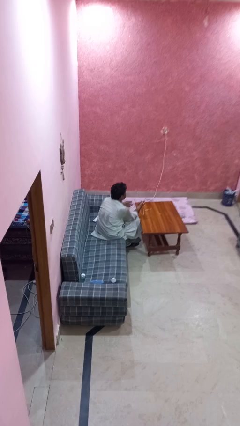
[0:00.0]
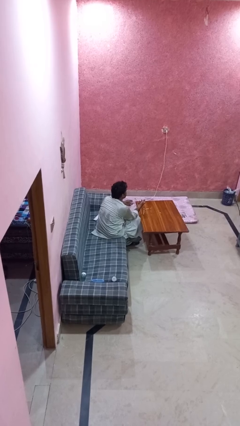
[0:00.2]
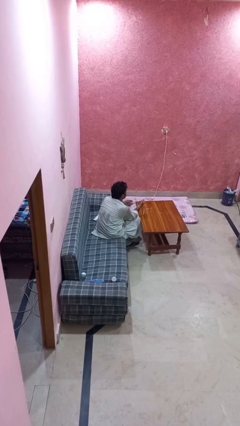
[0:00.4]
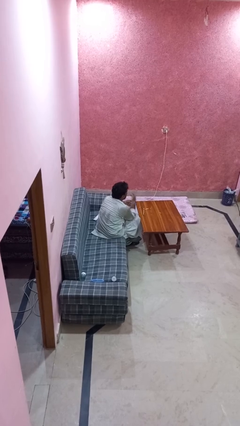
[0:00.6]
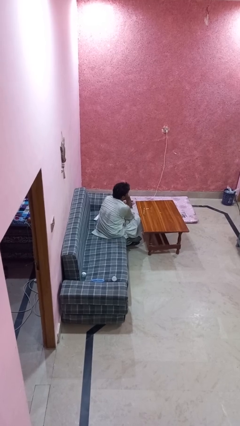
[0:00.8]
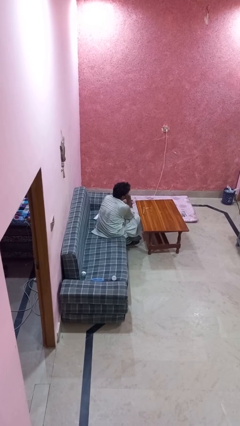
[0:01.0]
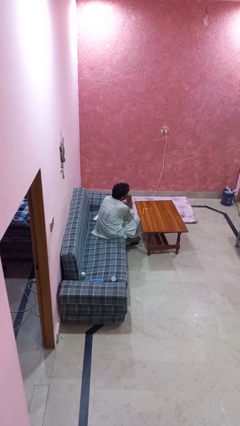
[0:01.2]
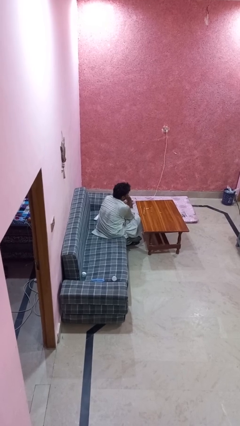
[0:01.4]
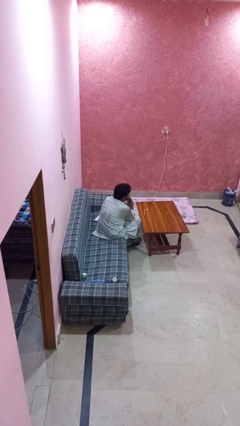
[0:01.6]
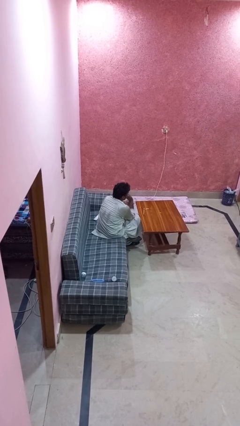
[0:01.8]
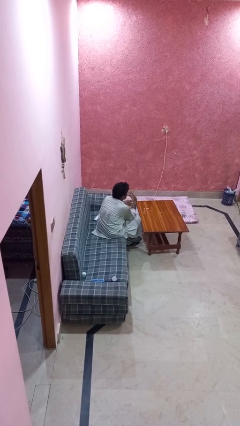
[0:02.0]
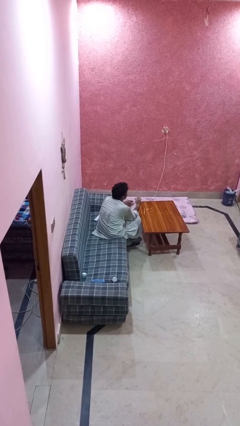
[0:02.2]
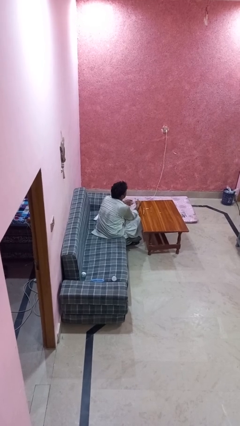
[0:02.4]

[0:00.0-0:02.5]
person licks fingers

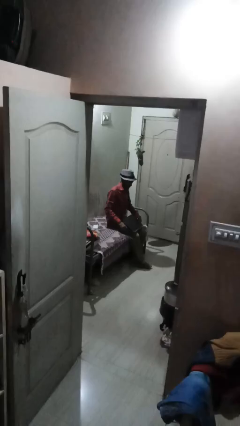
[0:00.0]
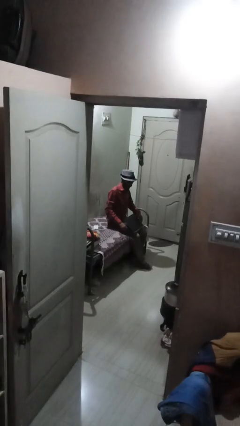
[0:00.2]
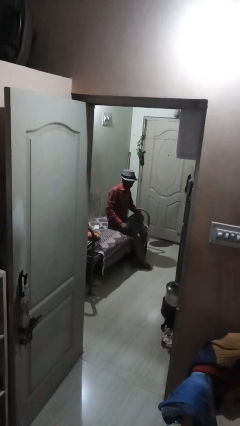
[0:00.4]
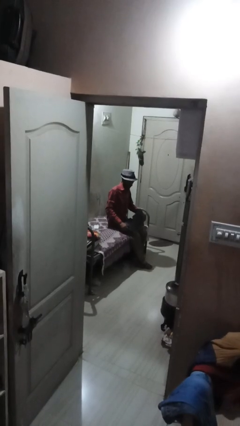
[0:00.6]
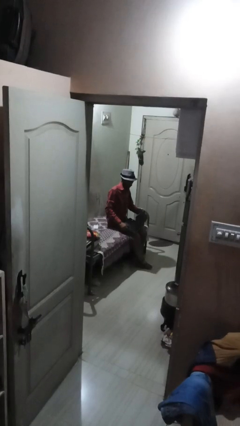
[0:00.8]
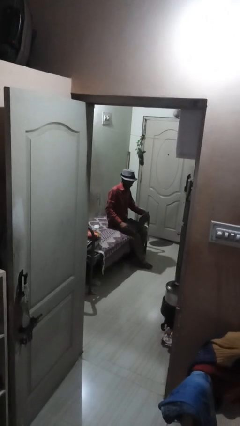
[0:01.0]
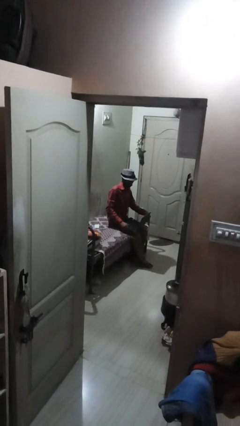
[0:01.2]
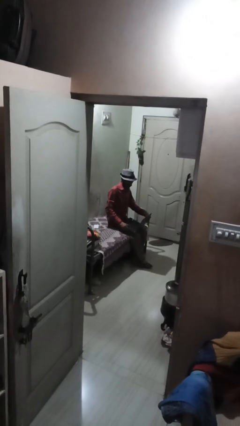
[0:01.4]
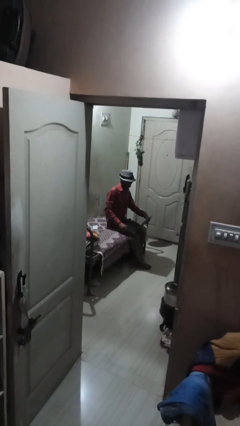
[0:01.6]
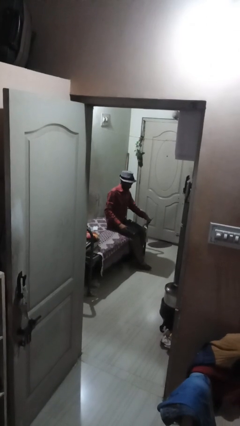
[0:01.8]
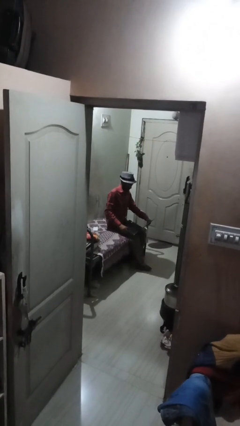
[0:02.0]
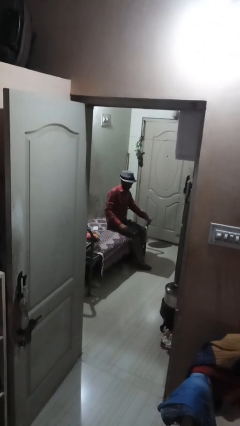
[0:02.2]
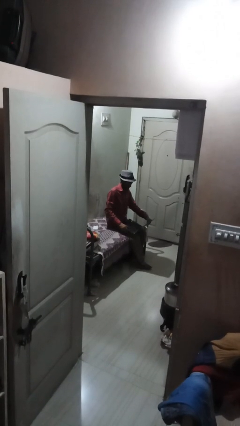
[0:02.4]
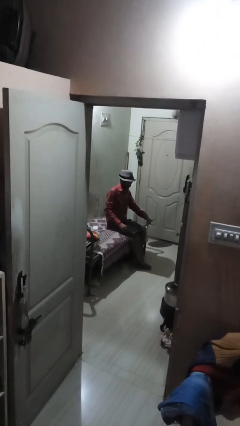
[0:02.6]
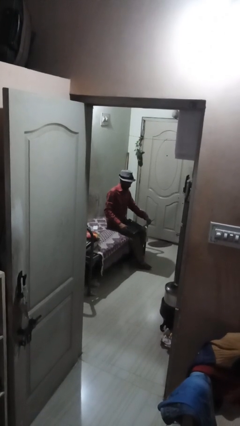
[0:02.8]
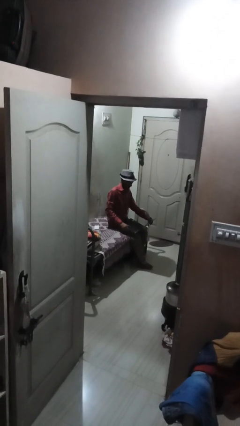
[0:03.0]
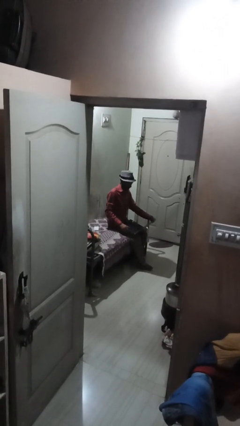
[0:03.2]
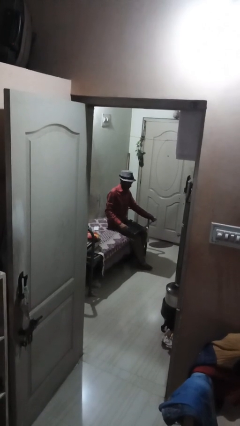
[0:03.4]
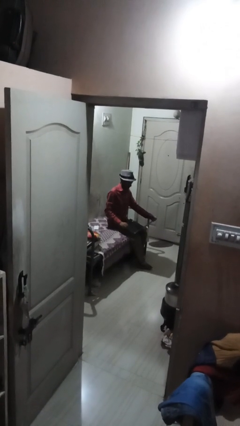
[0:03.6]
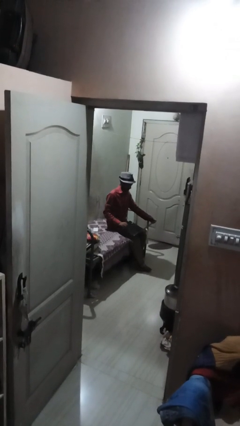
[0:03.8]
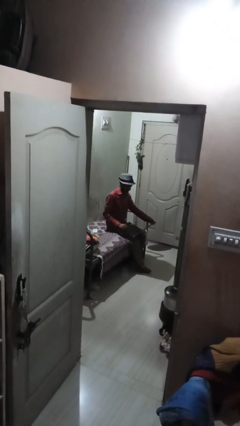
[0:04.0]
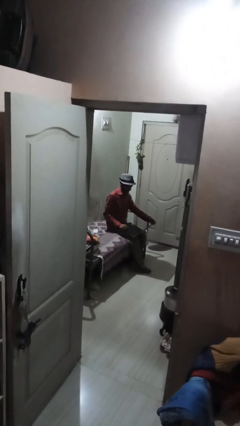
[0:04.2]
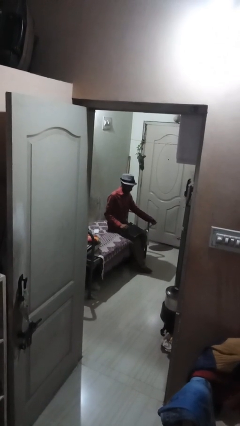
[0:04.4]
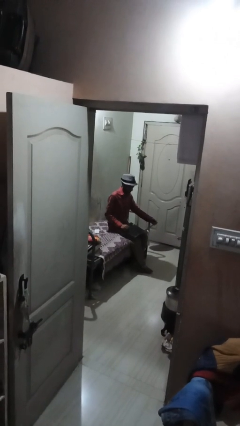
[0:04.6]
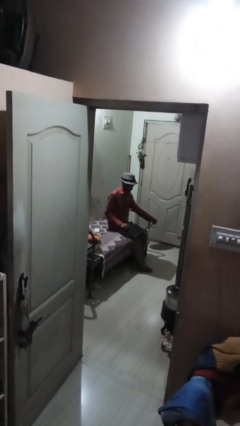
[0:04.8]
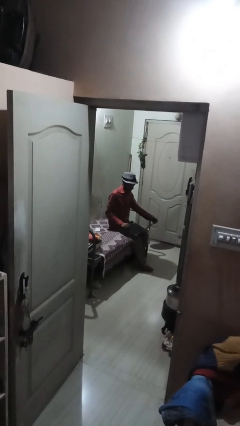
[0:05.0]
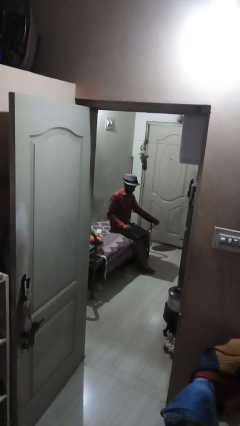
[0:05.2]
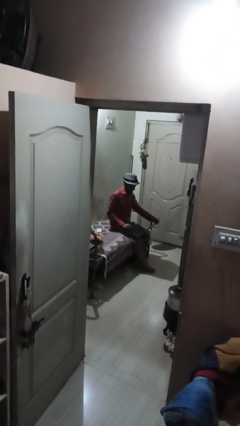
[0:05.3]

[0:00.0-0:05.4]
person opens laptop

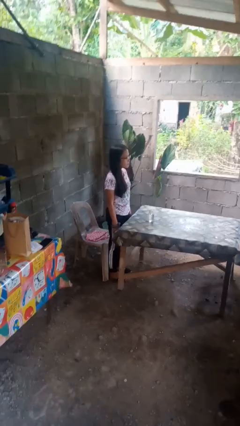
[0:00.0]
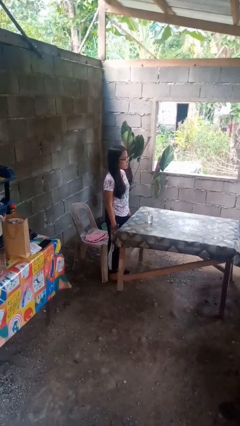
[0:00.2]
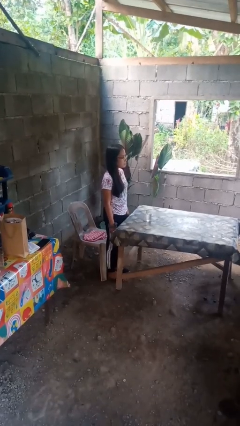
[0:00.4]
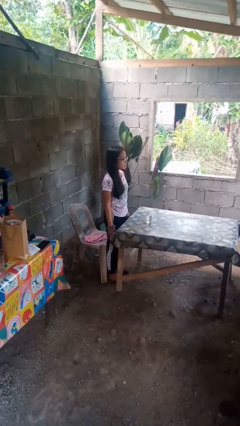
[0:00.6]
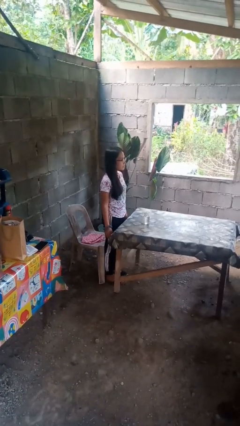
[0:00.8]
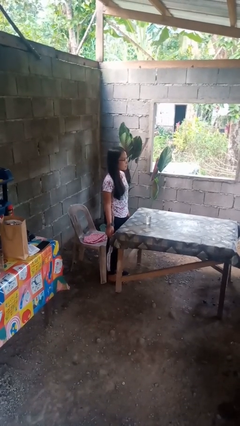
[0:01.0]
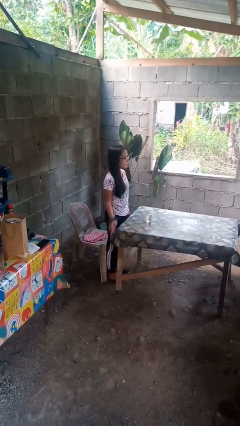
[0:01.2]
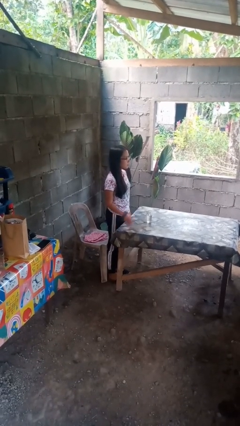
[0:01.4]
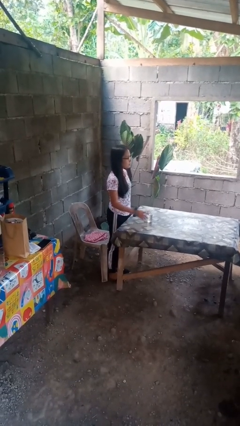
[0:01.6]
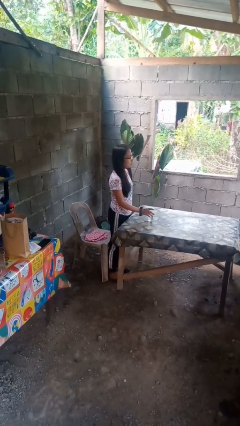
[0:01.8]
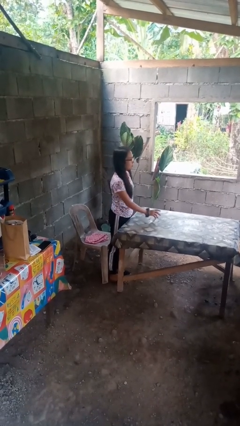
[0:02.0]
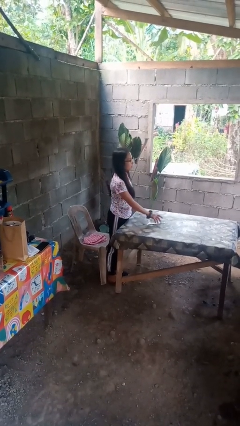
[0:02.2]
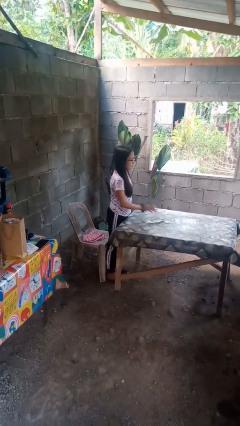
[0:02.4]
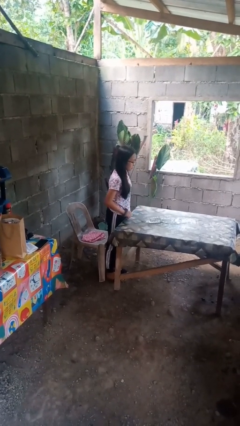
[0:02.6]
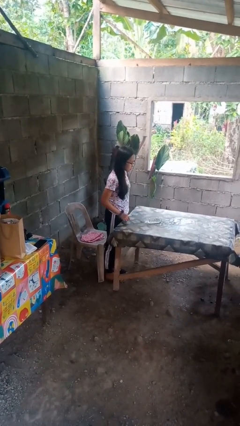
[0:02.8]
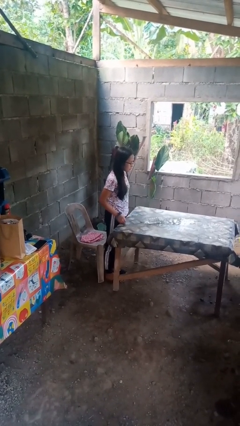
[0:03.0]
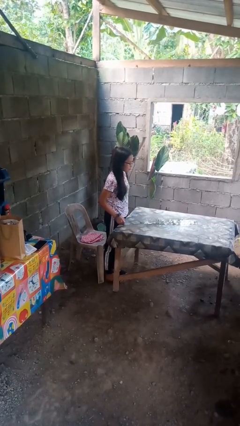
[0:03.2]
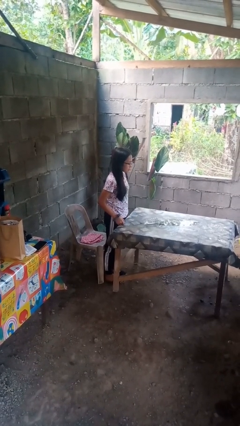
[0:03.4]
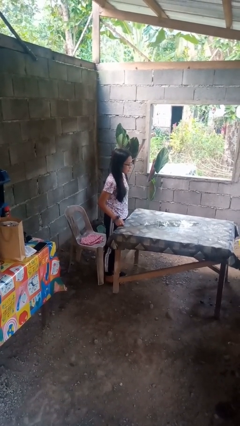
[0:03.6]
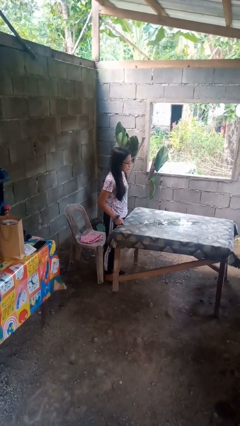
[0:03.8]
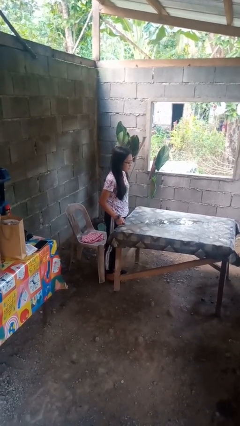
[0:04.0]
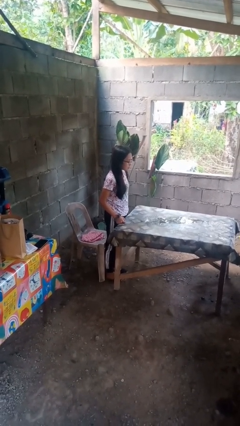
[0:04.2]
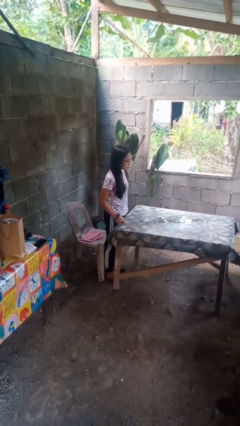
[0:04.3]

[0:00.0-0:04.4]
person spills on table

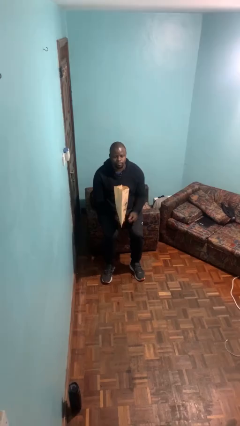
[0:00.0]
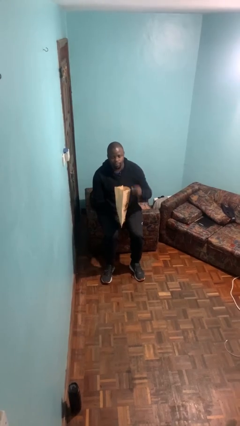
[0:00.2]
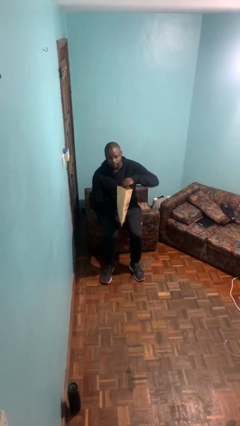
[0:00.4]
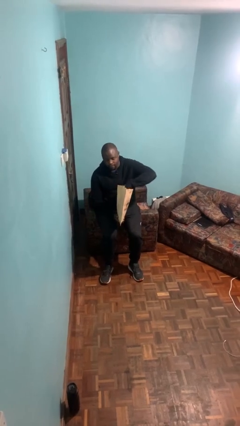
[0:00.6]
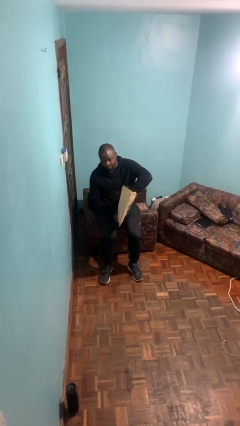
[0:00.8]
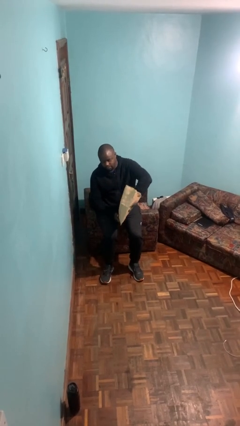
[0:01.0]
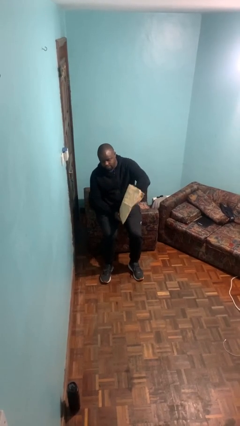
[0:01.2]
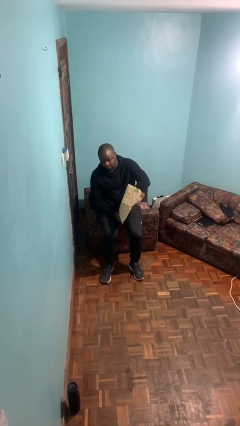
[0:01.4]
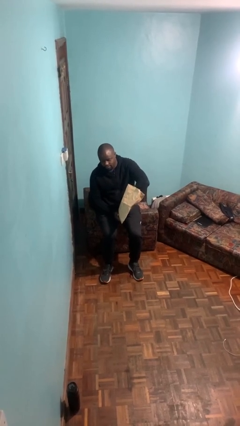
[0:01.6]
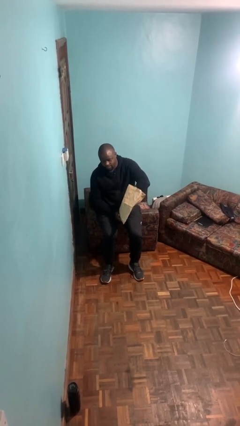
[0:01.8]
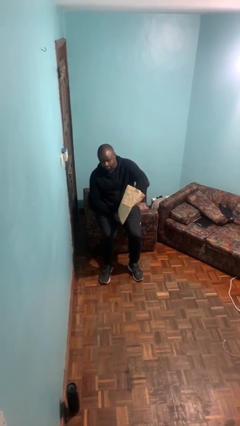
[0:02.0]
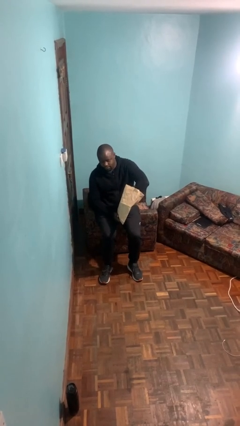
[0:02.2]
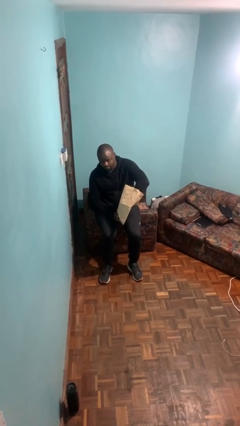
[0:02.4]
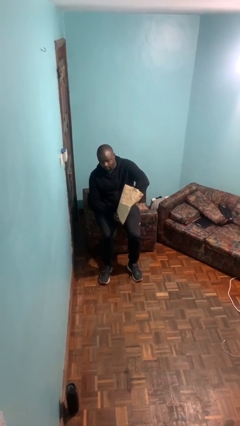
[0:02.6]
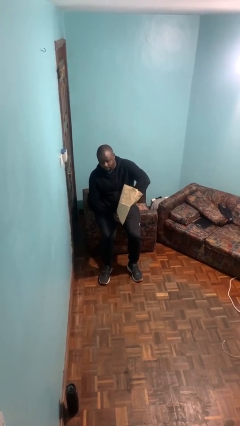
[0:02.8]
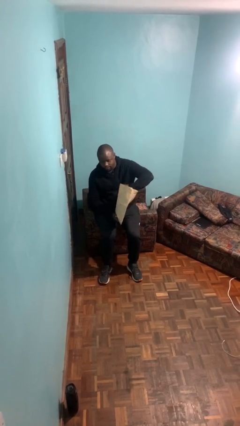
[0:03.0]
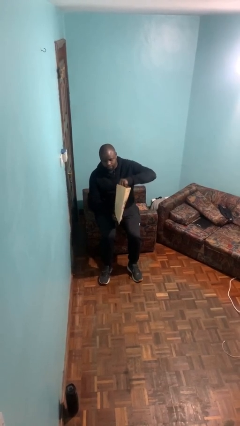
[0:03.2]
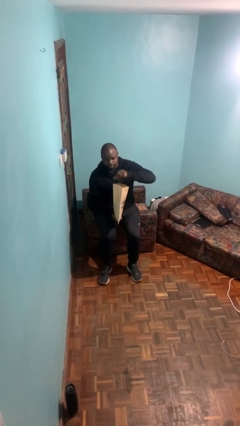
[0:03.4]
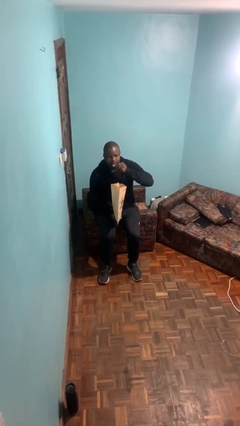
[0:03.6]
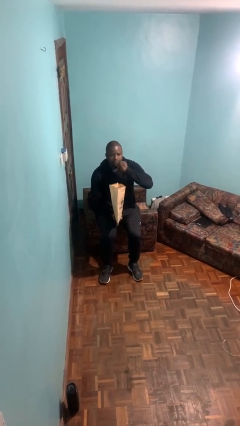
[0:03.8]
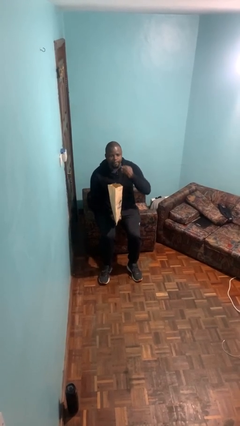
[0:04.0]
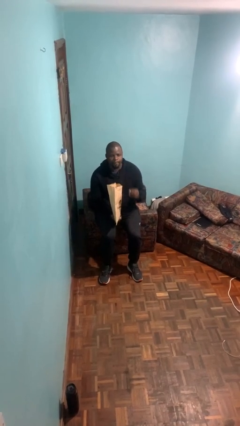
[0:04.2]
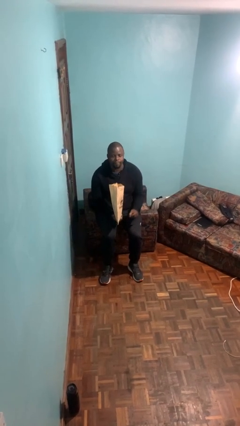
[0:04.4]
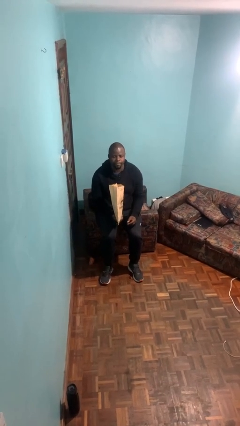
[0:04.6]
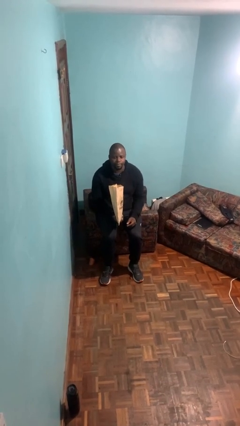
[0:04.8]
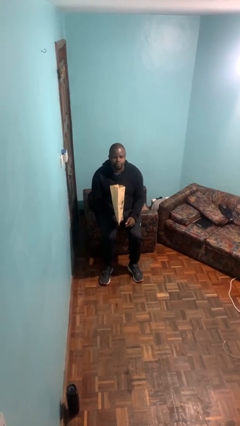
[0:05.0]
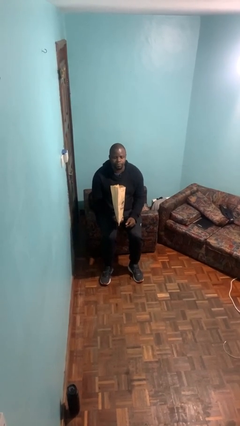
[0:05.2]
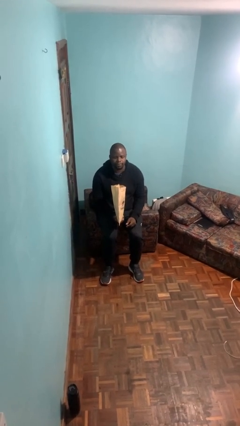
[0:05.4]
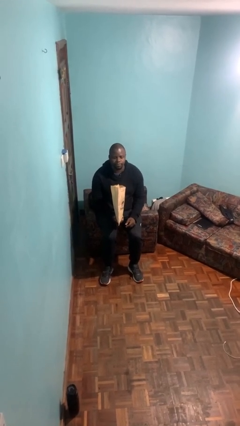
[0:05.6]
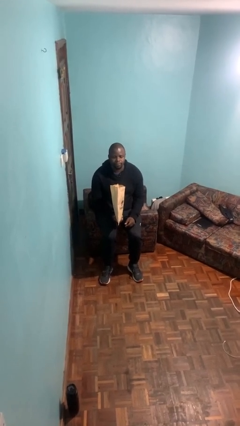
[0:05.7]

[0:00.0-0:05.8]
person eats snack from bag
